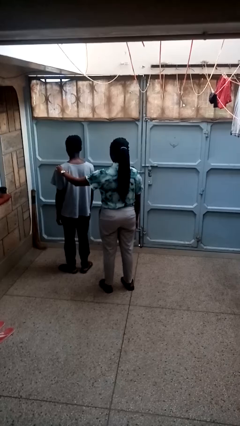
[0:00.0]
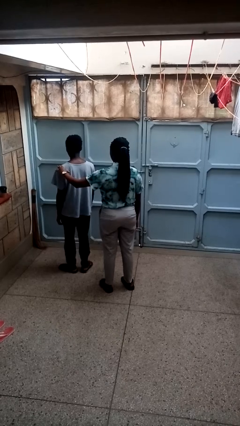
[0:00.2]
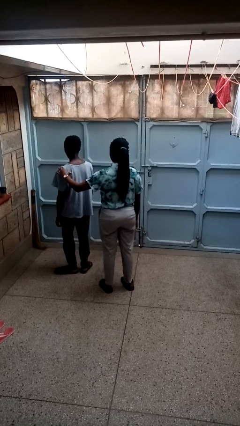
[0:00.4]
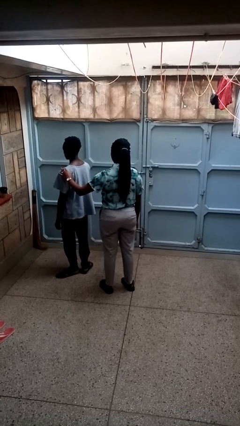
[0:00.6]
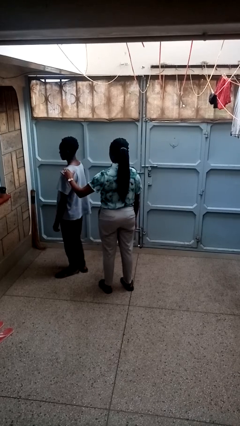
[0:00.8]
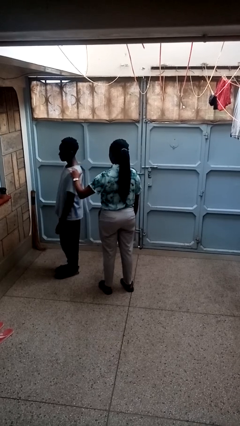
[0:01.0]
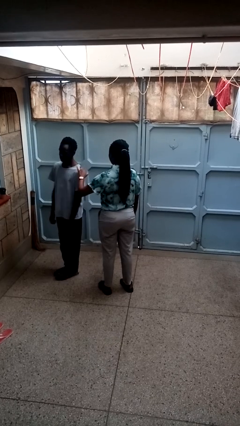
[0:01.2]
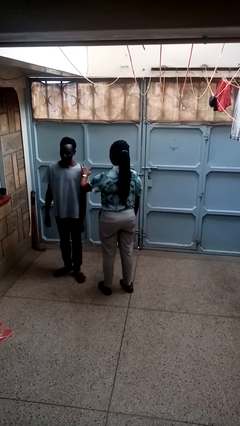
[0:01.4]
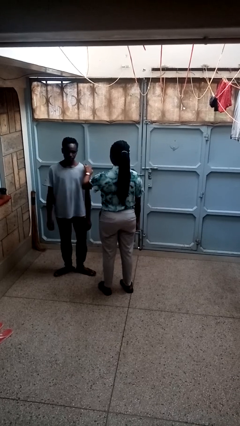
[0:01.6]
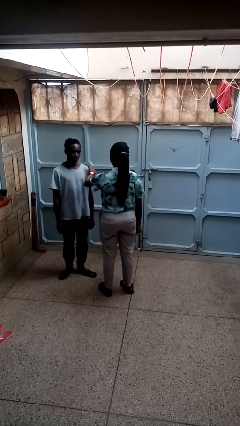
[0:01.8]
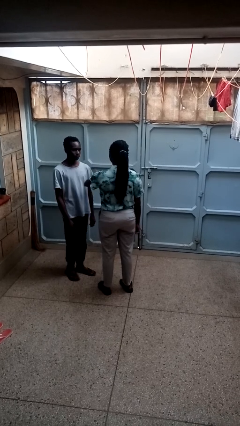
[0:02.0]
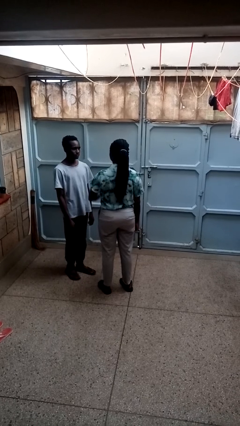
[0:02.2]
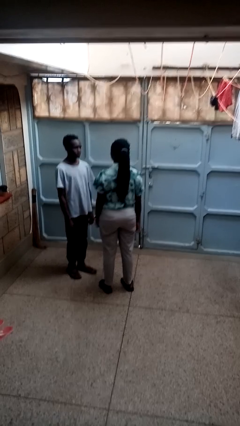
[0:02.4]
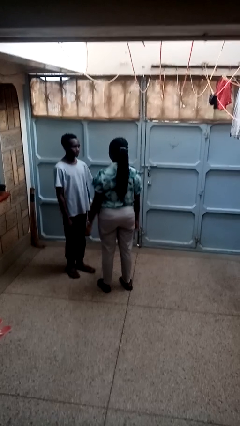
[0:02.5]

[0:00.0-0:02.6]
person spins person around

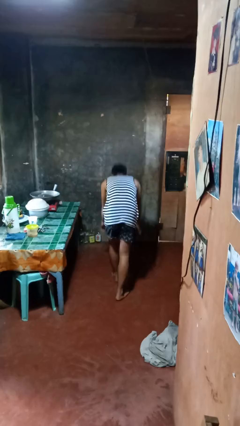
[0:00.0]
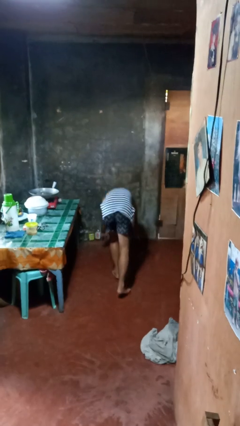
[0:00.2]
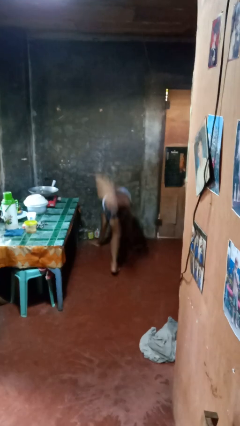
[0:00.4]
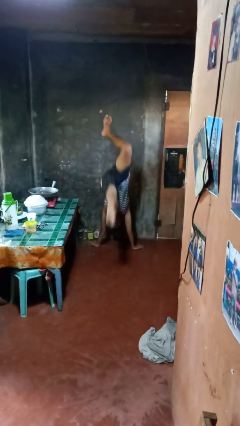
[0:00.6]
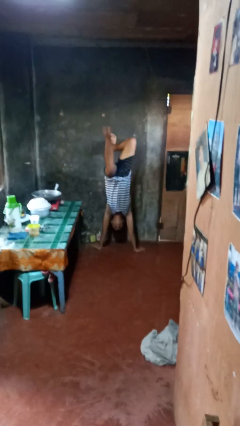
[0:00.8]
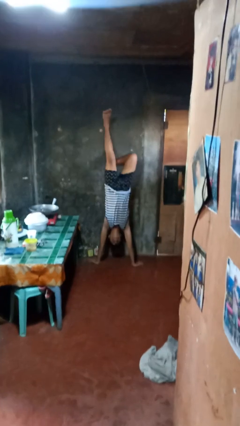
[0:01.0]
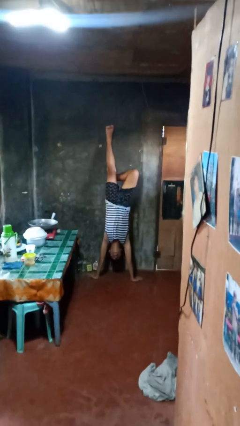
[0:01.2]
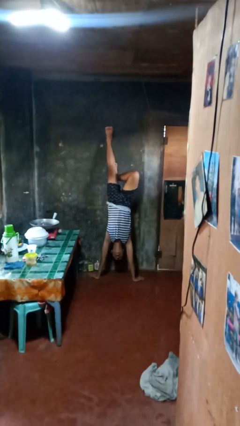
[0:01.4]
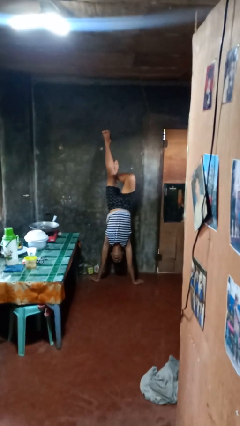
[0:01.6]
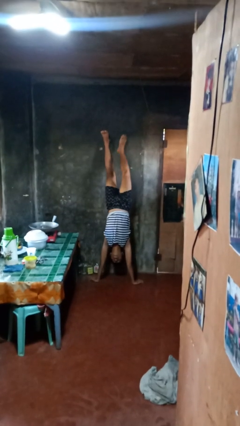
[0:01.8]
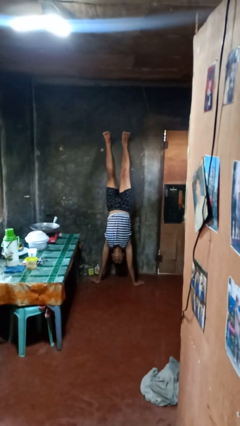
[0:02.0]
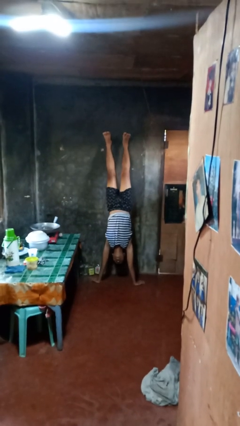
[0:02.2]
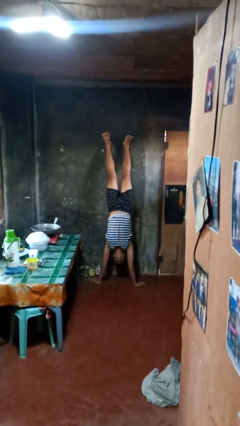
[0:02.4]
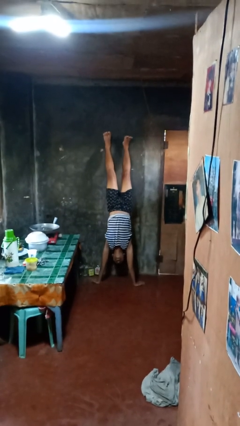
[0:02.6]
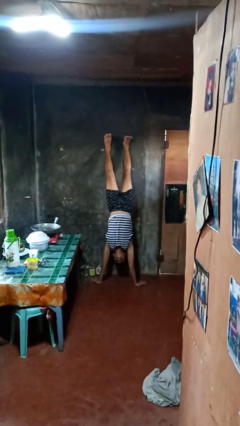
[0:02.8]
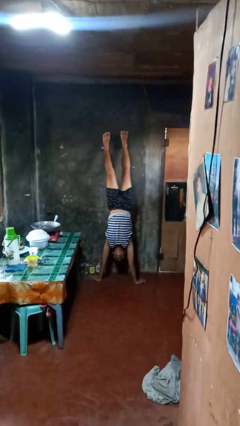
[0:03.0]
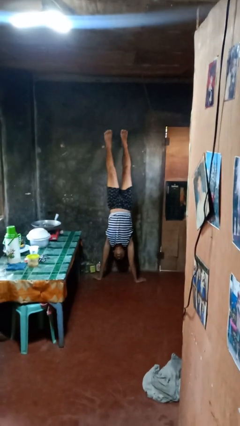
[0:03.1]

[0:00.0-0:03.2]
person handstand

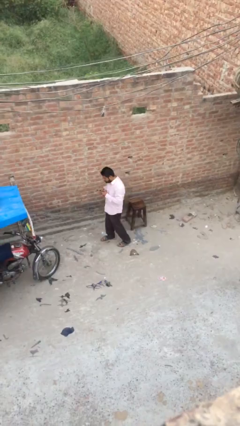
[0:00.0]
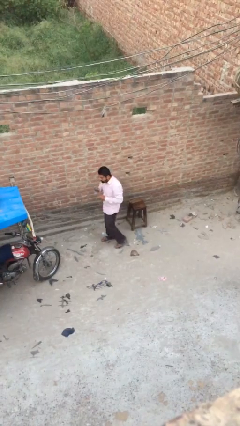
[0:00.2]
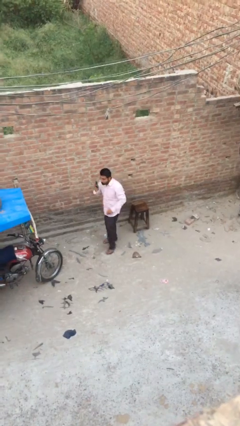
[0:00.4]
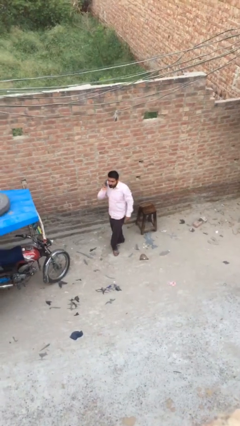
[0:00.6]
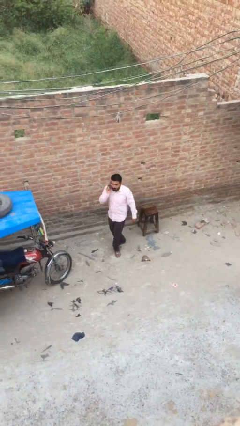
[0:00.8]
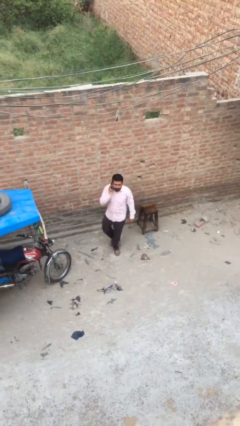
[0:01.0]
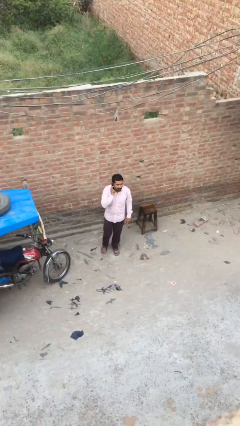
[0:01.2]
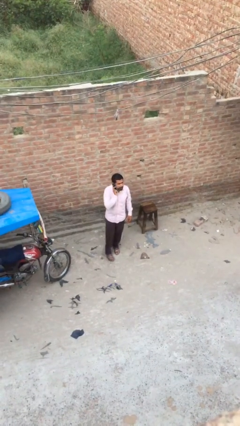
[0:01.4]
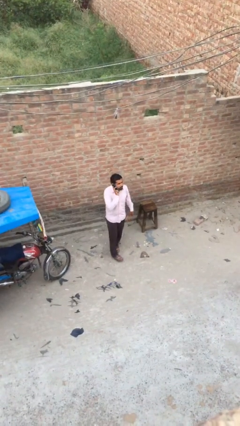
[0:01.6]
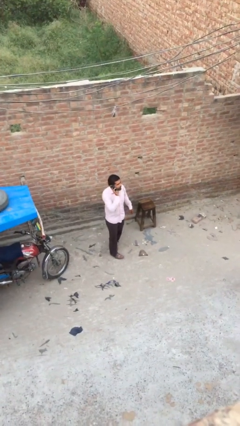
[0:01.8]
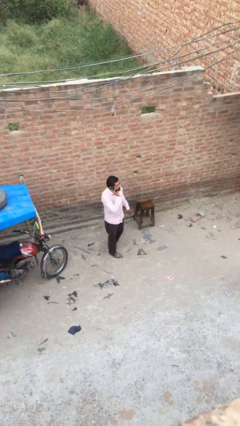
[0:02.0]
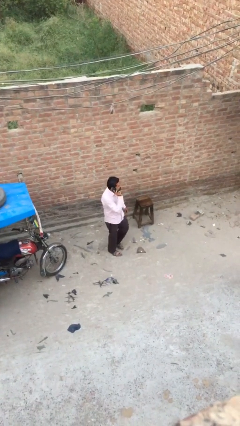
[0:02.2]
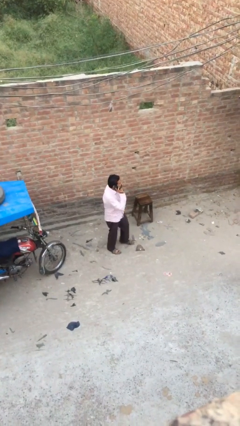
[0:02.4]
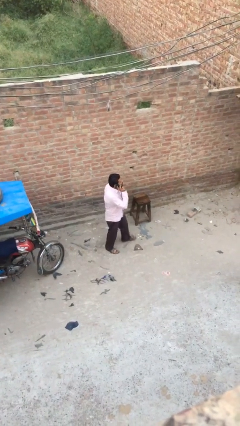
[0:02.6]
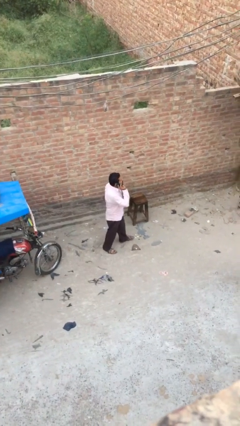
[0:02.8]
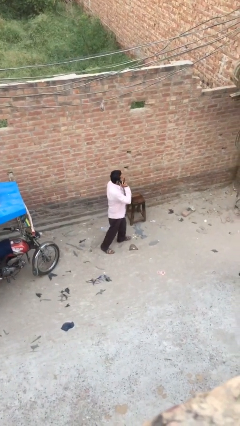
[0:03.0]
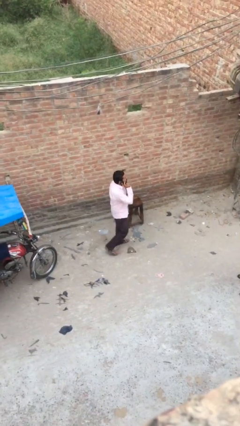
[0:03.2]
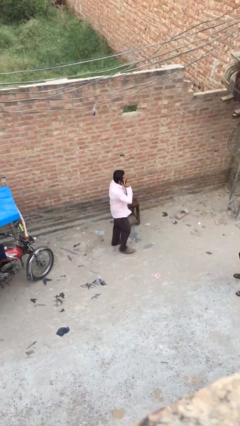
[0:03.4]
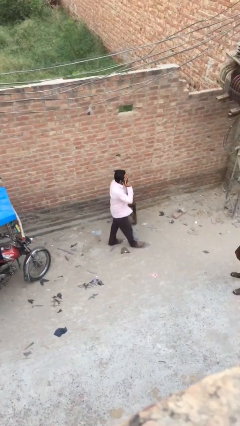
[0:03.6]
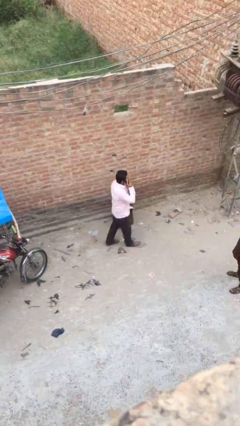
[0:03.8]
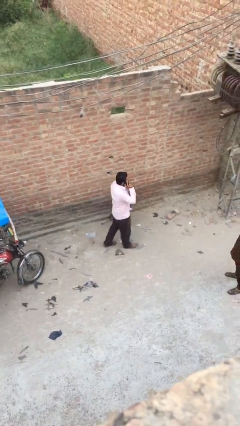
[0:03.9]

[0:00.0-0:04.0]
person talks on phone

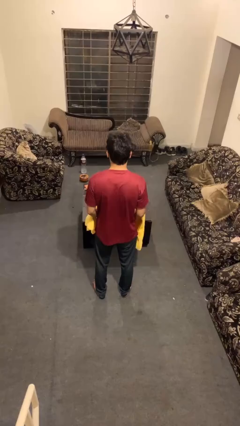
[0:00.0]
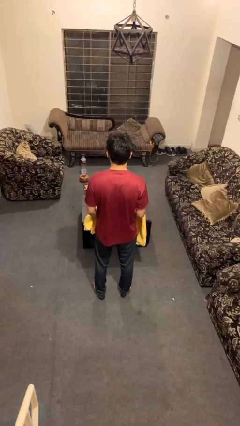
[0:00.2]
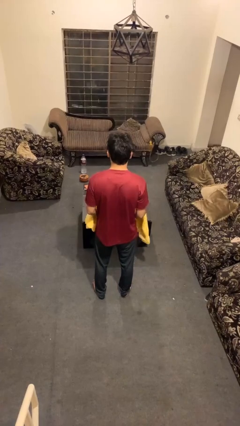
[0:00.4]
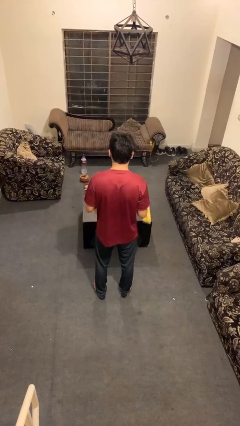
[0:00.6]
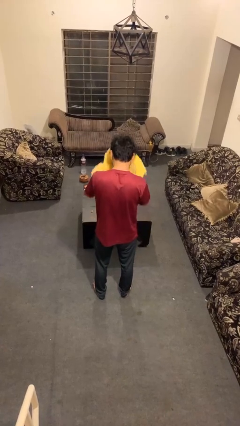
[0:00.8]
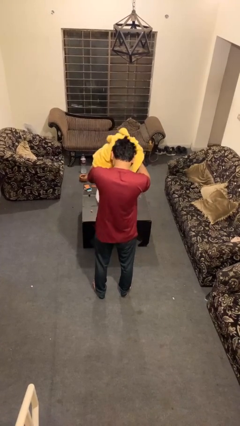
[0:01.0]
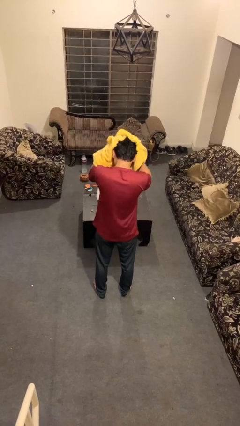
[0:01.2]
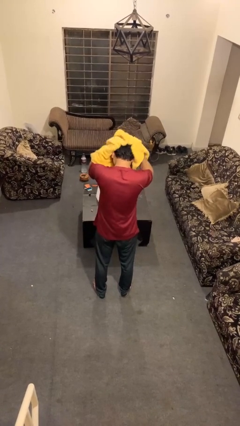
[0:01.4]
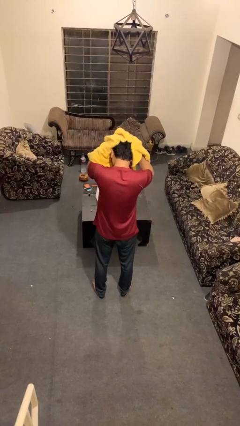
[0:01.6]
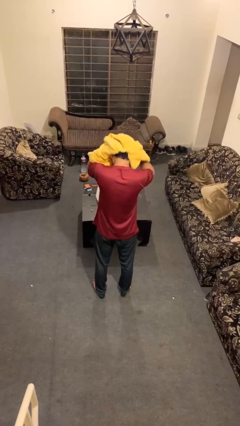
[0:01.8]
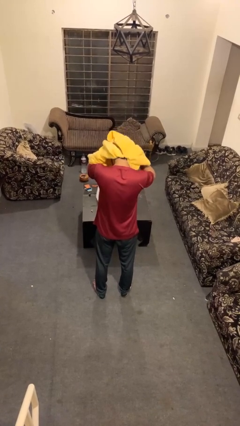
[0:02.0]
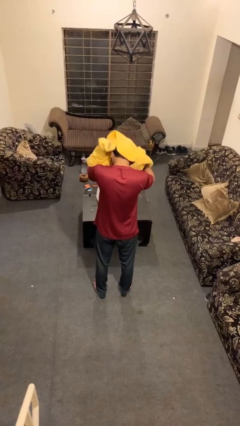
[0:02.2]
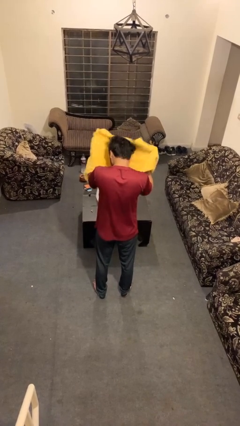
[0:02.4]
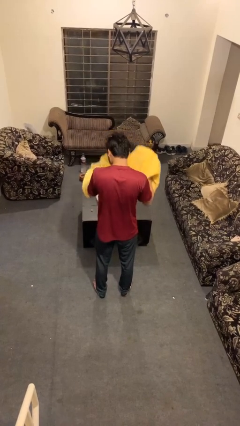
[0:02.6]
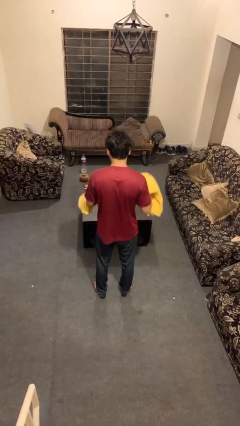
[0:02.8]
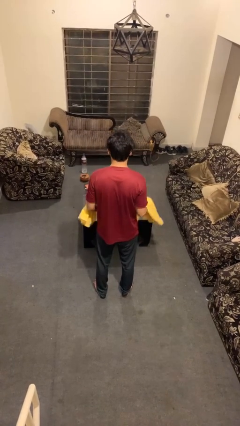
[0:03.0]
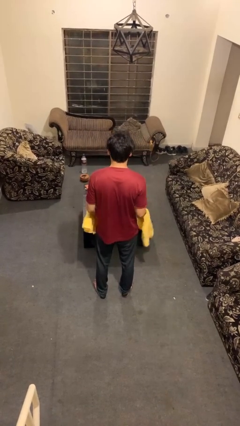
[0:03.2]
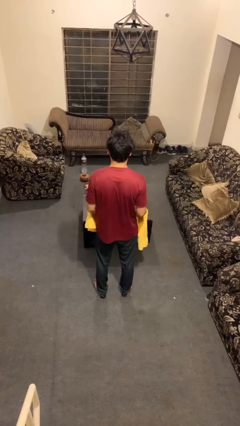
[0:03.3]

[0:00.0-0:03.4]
person dries hair with towel

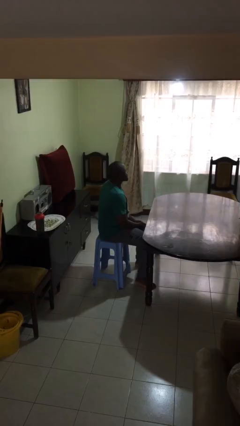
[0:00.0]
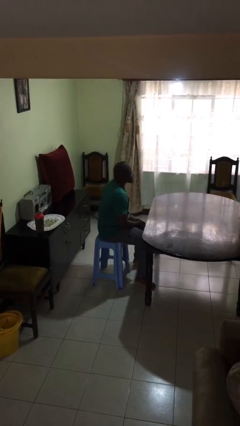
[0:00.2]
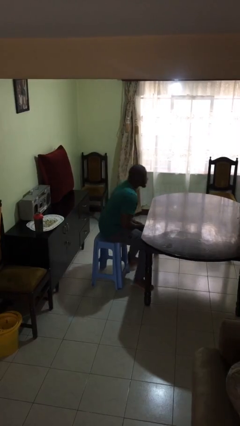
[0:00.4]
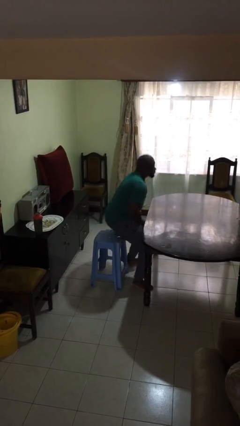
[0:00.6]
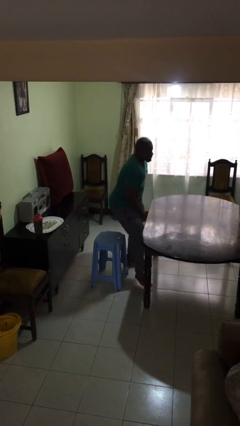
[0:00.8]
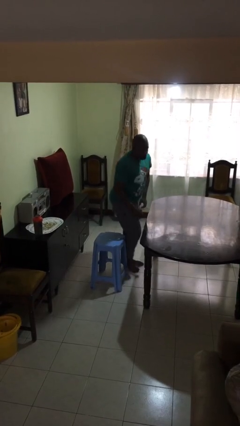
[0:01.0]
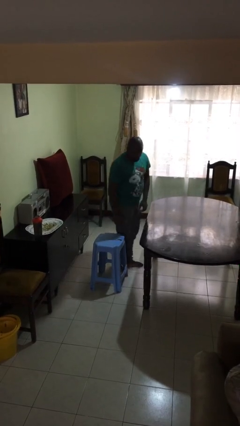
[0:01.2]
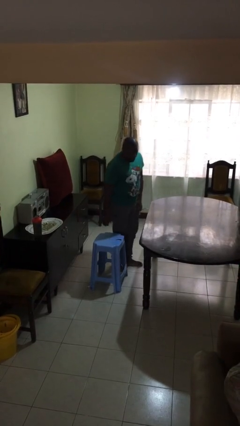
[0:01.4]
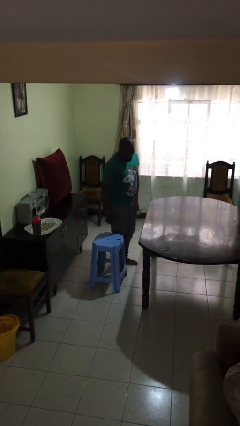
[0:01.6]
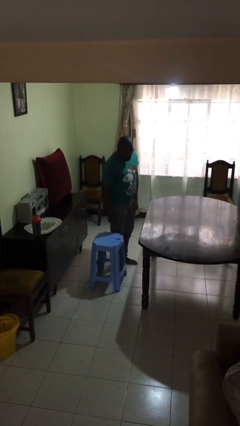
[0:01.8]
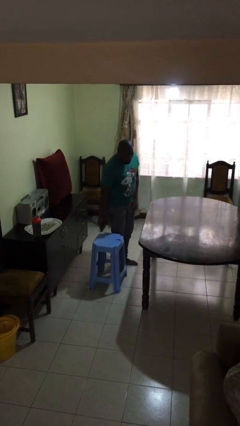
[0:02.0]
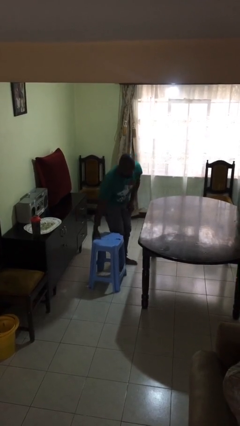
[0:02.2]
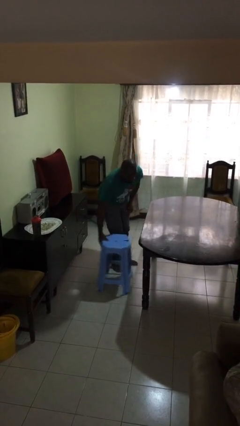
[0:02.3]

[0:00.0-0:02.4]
person stands up

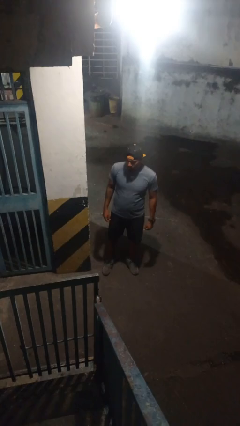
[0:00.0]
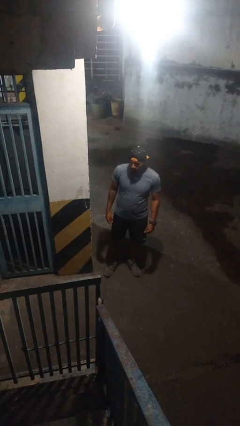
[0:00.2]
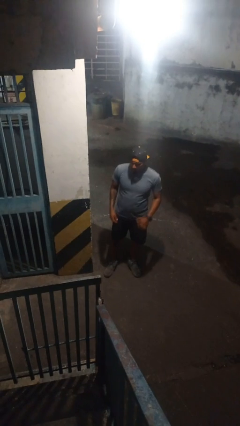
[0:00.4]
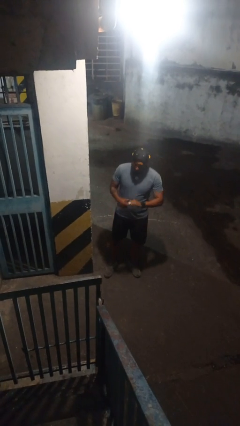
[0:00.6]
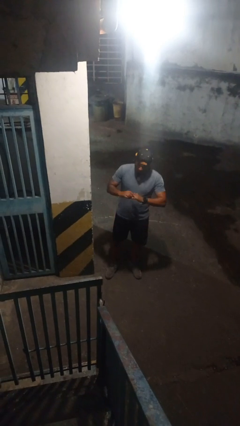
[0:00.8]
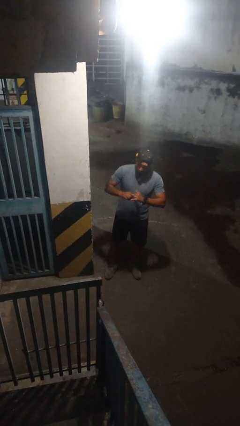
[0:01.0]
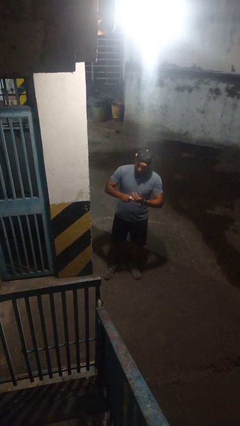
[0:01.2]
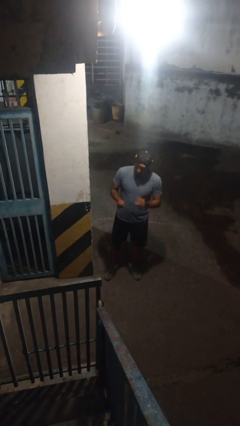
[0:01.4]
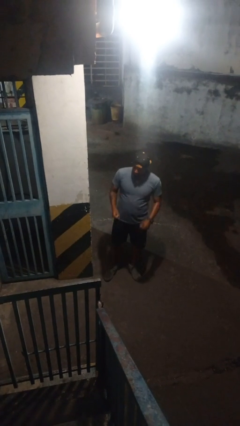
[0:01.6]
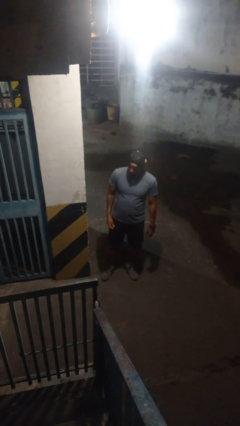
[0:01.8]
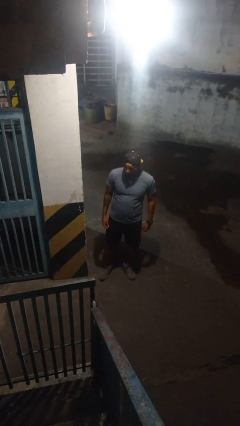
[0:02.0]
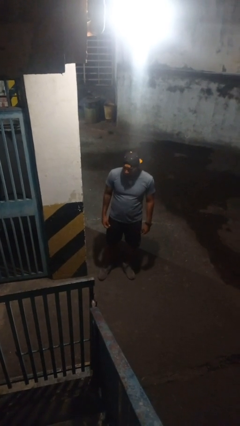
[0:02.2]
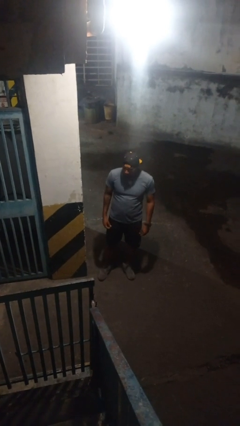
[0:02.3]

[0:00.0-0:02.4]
person takes off ring
